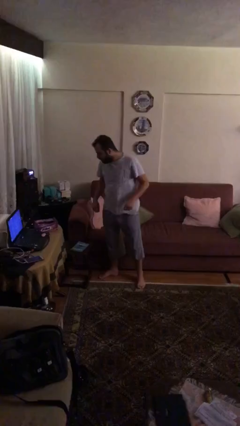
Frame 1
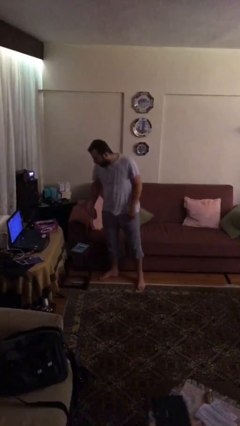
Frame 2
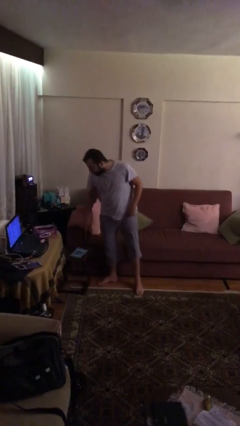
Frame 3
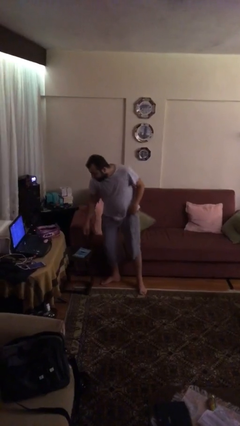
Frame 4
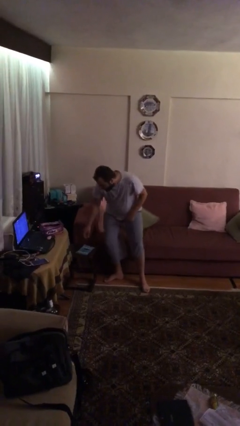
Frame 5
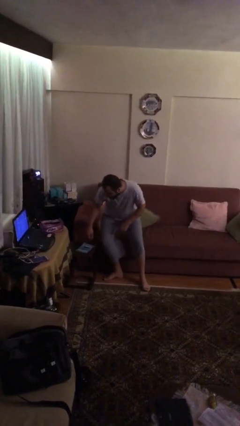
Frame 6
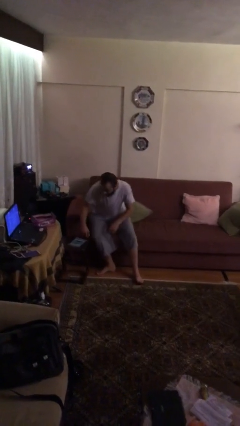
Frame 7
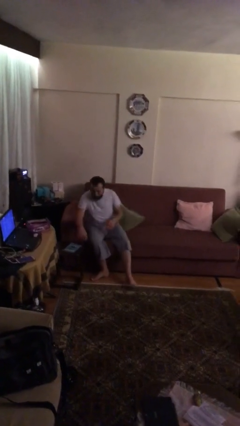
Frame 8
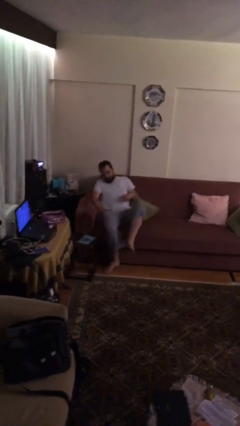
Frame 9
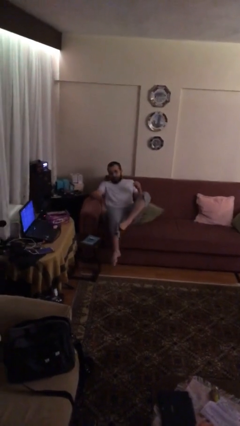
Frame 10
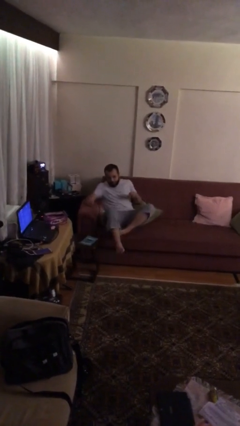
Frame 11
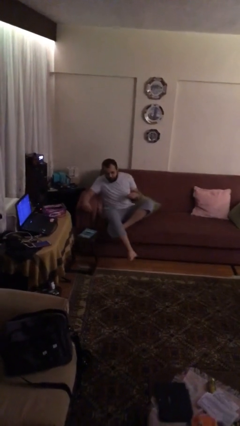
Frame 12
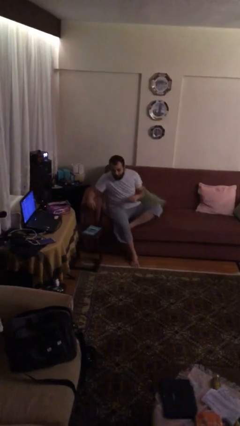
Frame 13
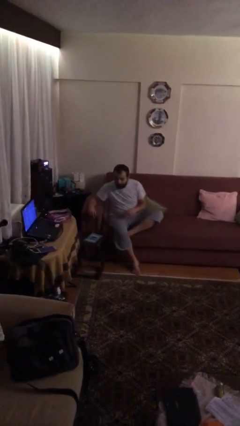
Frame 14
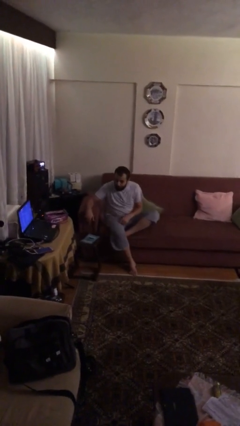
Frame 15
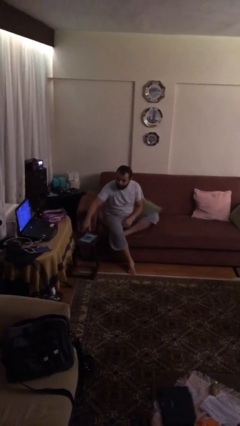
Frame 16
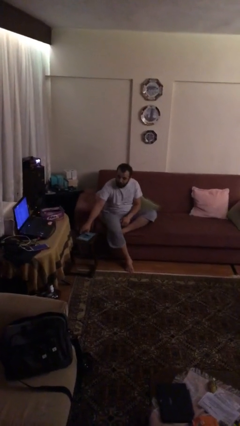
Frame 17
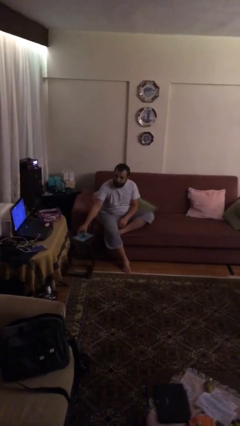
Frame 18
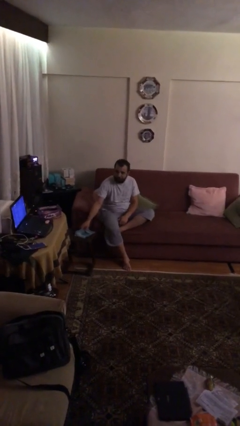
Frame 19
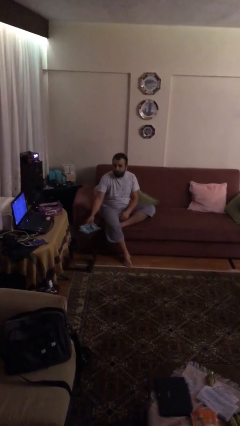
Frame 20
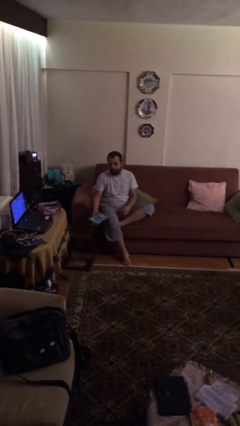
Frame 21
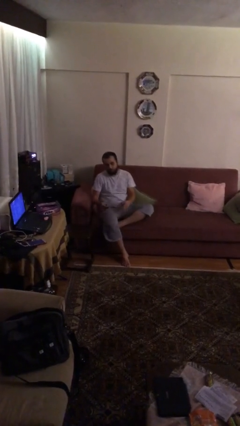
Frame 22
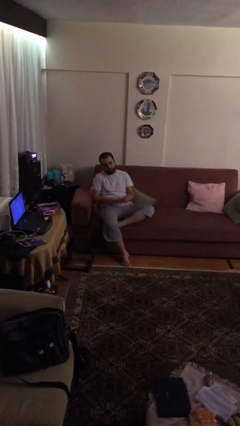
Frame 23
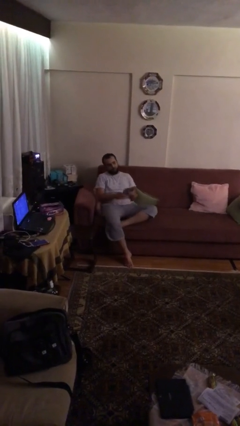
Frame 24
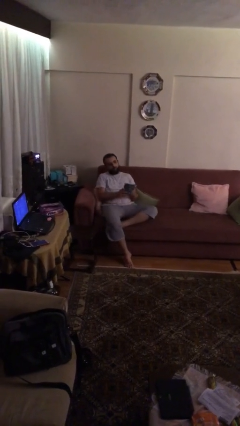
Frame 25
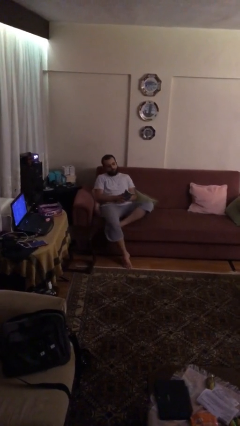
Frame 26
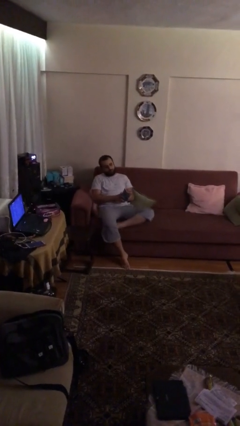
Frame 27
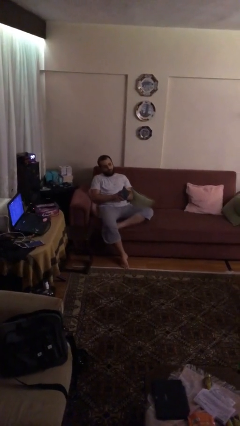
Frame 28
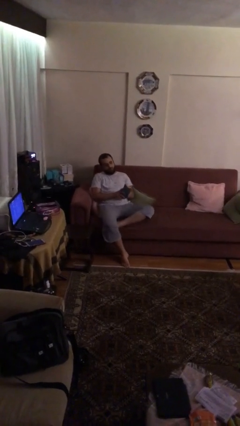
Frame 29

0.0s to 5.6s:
person sits down

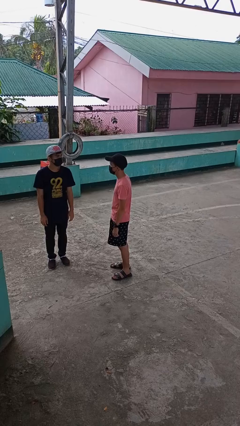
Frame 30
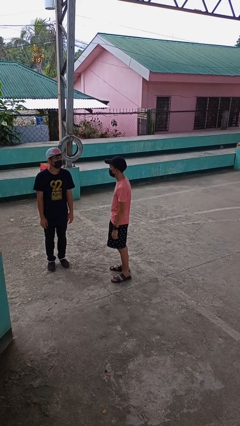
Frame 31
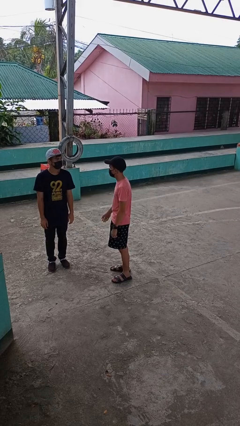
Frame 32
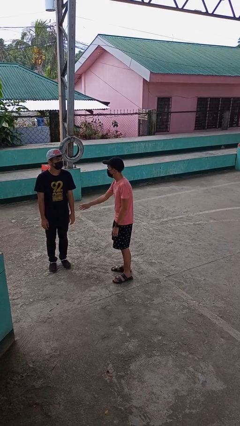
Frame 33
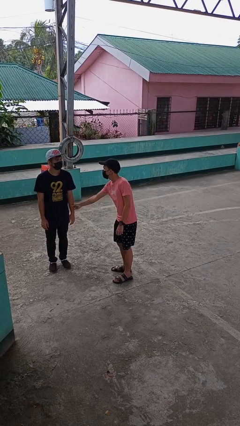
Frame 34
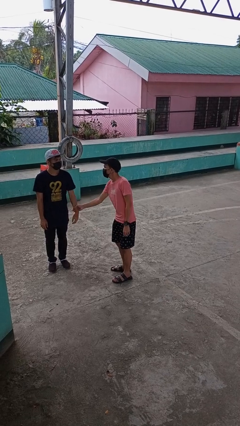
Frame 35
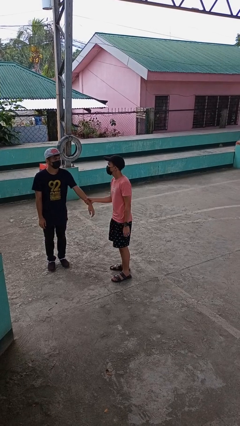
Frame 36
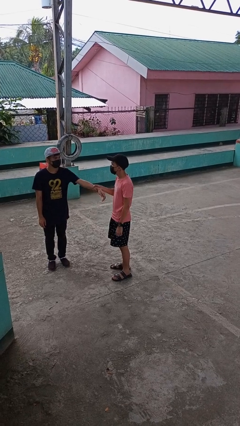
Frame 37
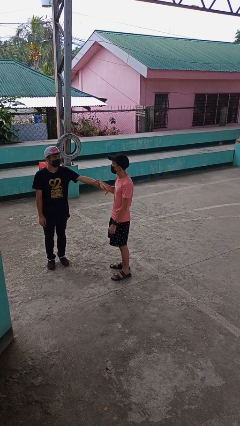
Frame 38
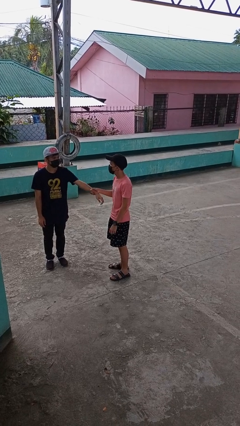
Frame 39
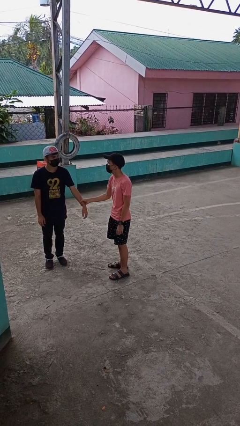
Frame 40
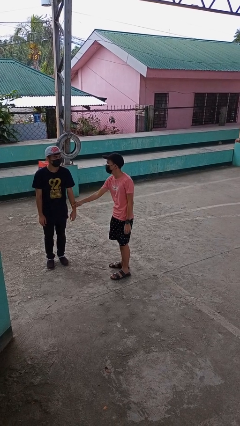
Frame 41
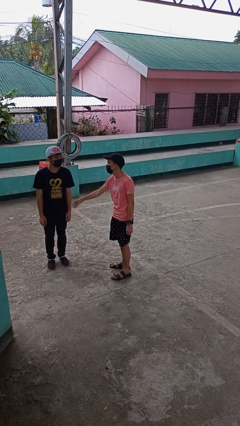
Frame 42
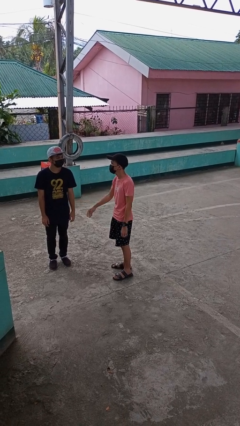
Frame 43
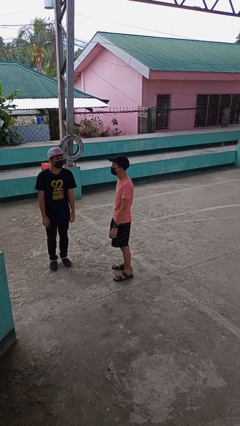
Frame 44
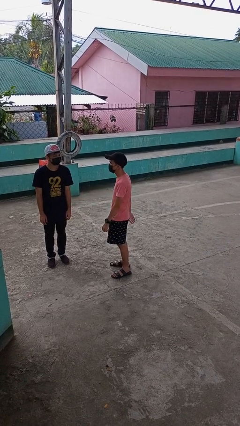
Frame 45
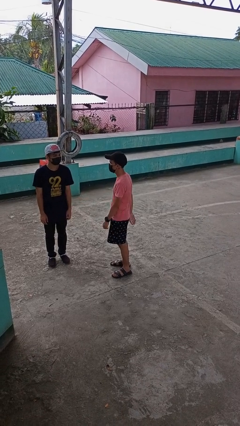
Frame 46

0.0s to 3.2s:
person grabs person by forearm

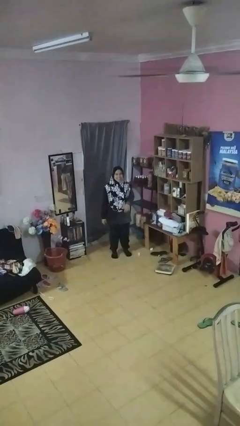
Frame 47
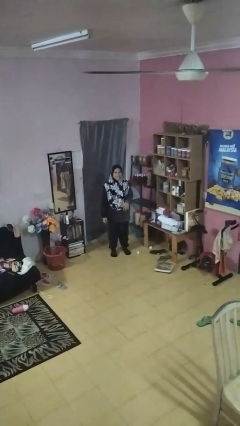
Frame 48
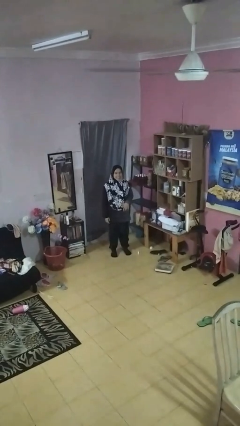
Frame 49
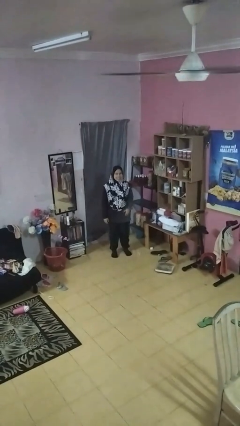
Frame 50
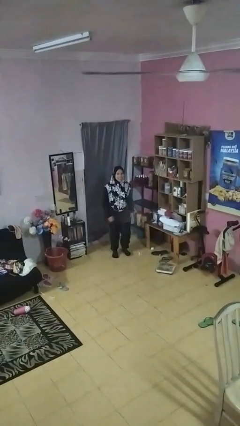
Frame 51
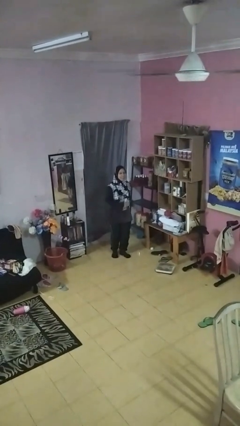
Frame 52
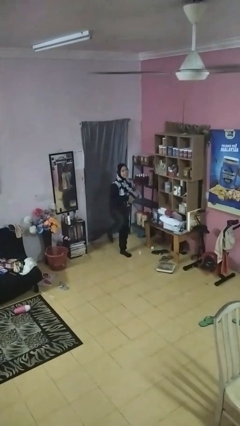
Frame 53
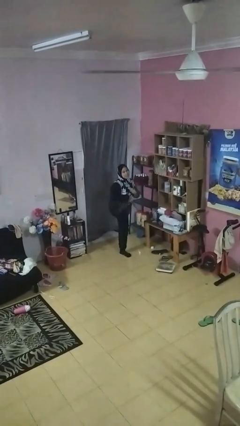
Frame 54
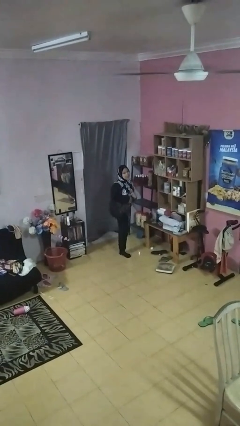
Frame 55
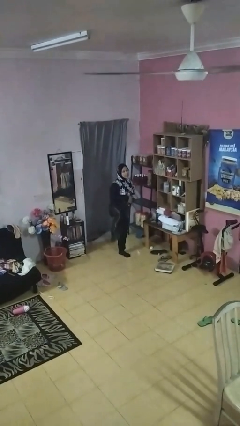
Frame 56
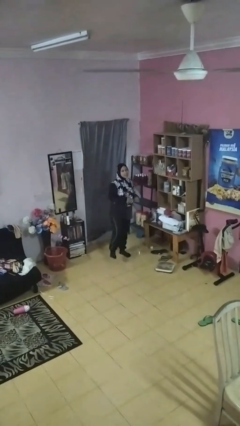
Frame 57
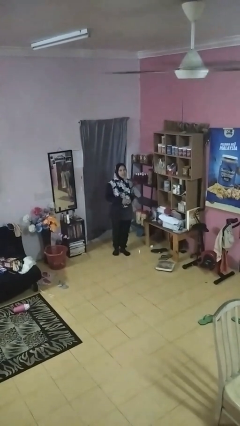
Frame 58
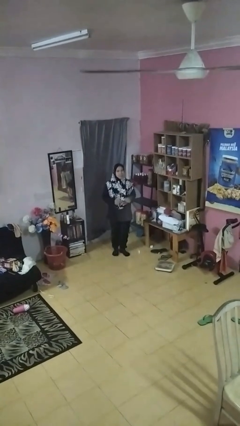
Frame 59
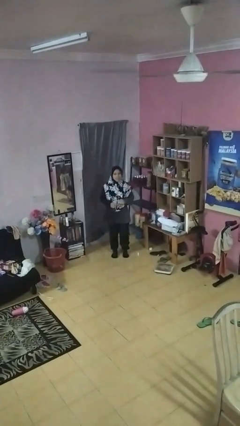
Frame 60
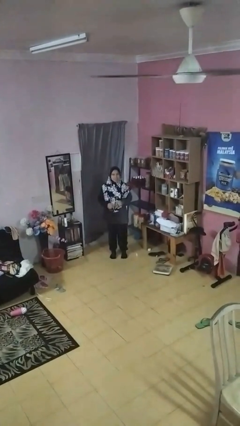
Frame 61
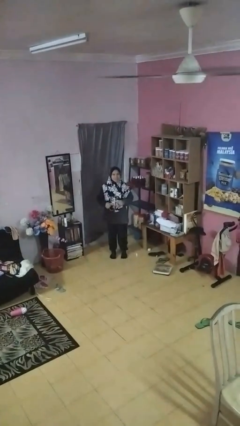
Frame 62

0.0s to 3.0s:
person karate kicks

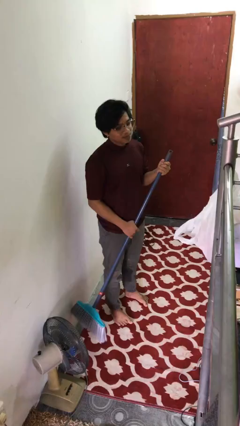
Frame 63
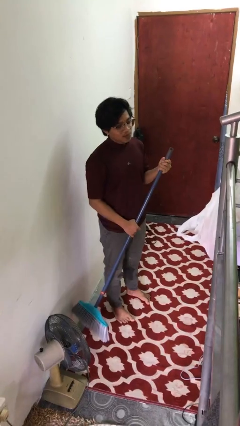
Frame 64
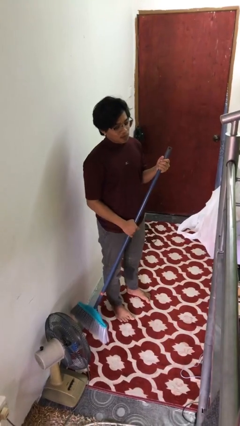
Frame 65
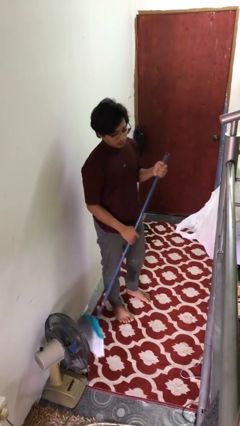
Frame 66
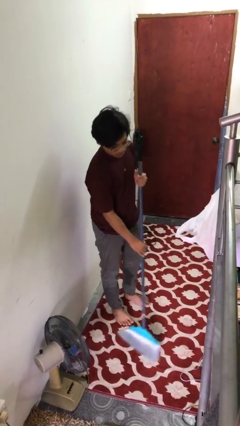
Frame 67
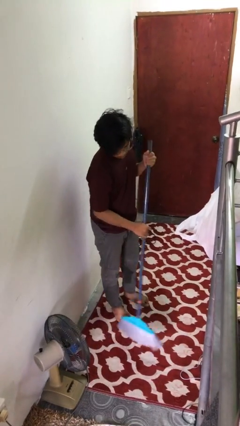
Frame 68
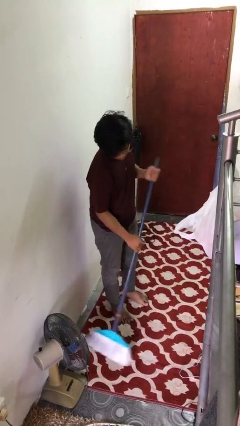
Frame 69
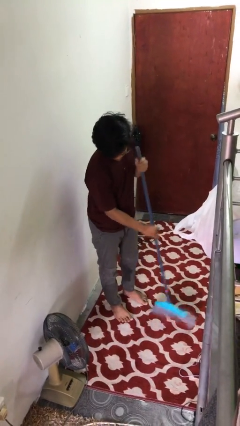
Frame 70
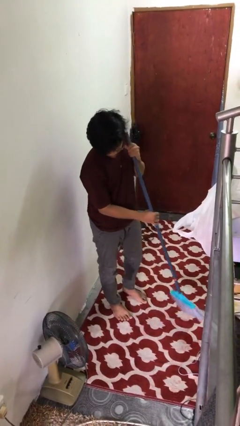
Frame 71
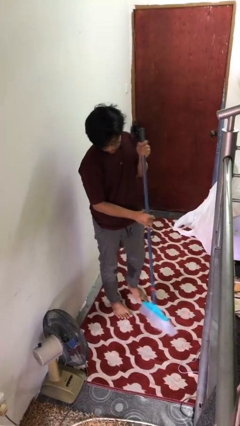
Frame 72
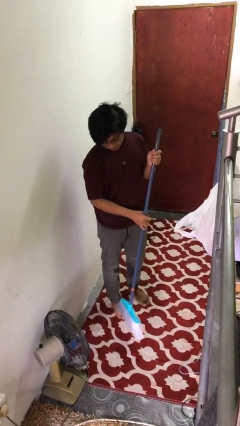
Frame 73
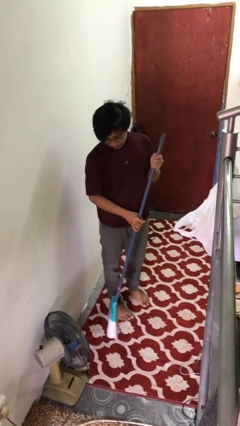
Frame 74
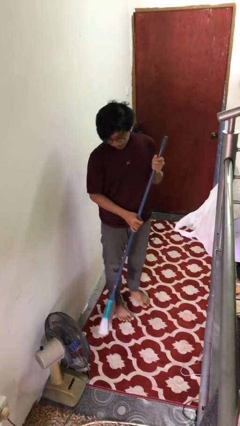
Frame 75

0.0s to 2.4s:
person sweeps floor

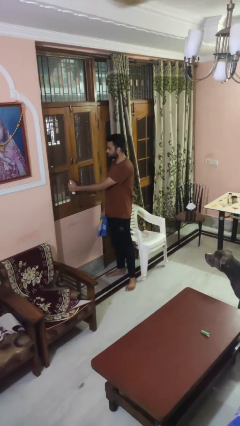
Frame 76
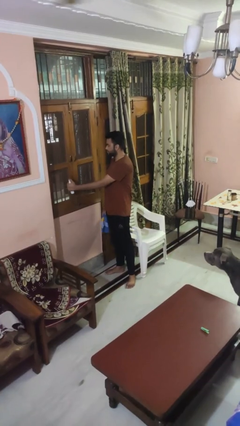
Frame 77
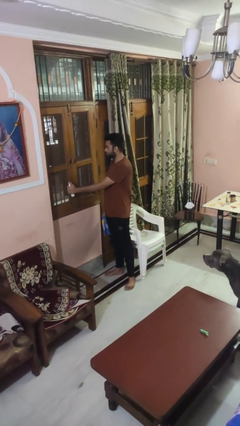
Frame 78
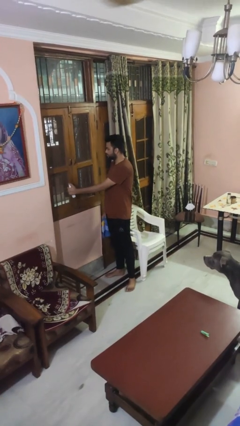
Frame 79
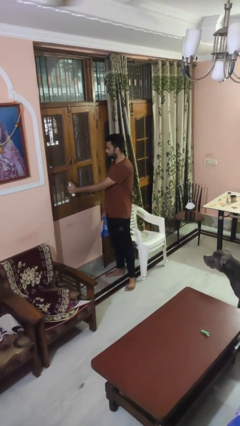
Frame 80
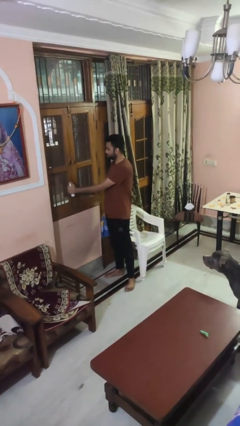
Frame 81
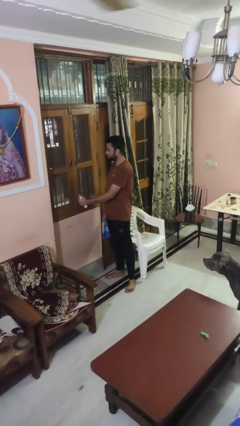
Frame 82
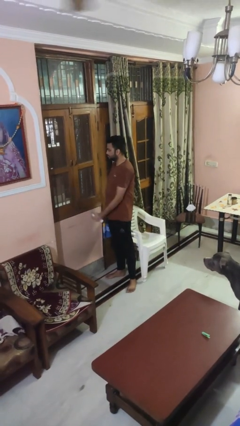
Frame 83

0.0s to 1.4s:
person sprays from bottle

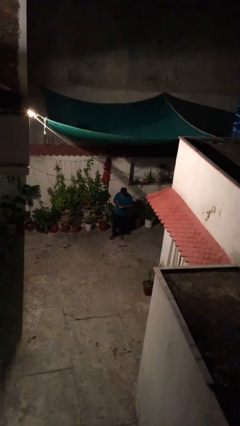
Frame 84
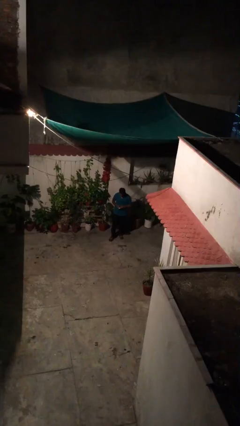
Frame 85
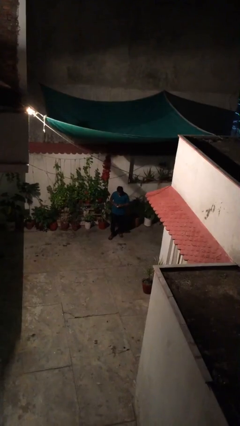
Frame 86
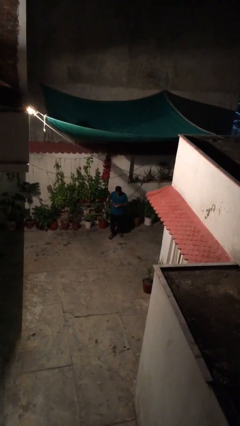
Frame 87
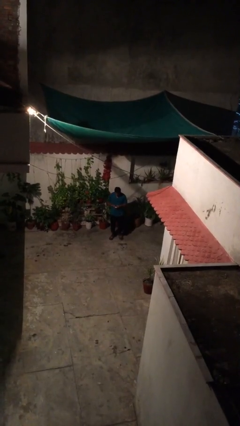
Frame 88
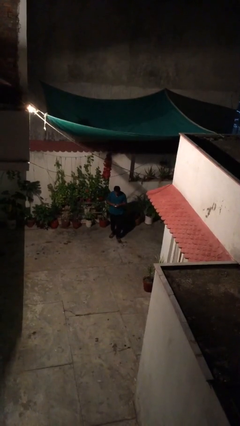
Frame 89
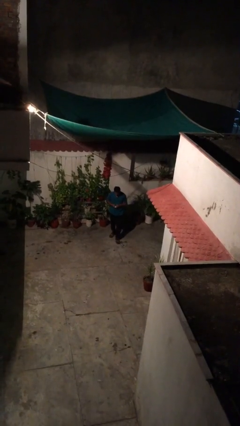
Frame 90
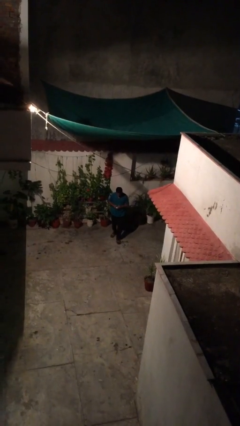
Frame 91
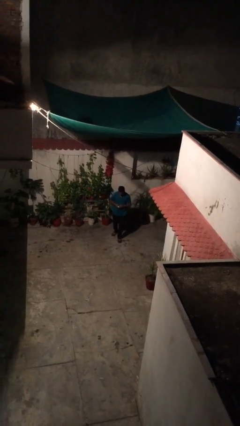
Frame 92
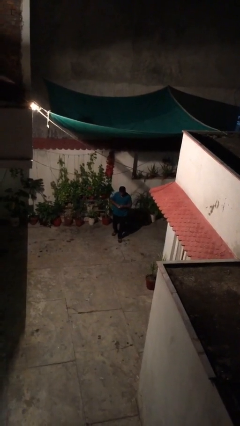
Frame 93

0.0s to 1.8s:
person texts on phone
